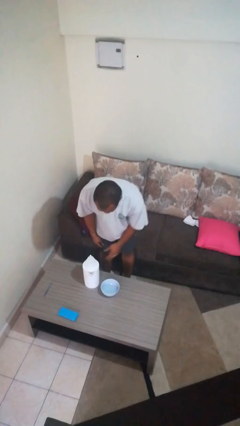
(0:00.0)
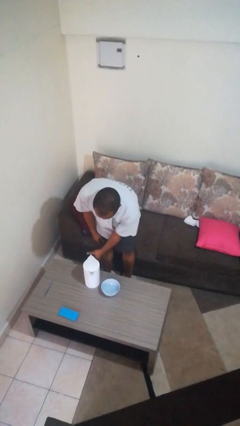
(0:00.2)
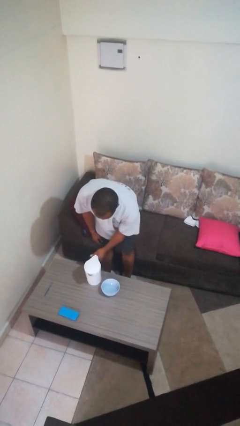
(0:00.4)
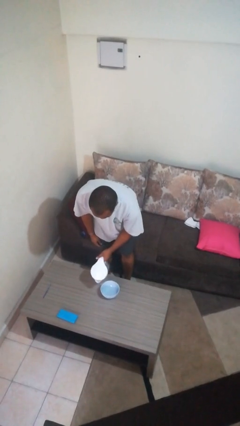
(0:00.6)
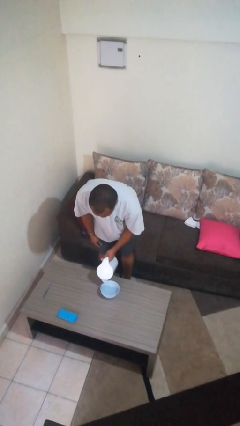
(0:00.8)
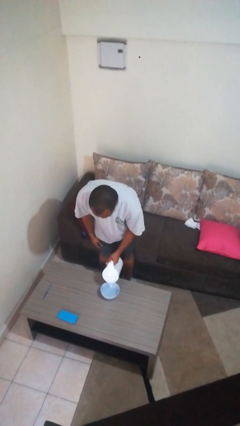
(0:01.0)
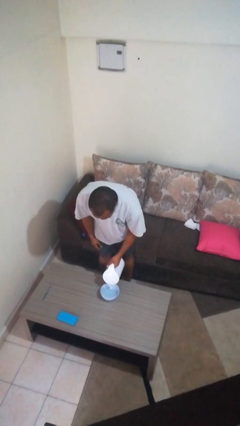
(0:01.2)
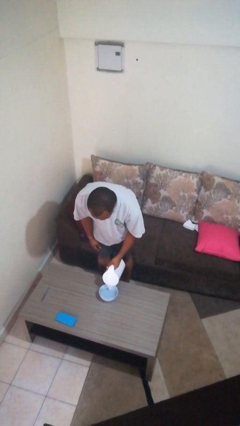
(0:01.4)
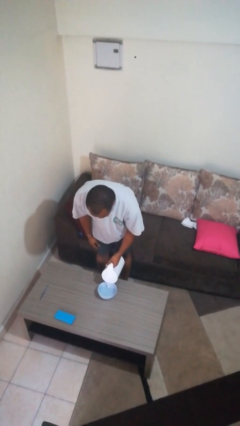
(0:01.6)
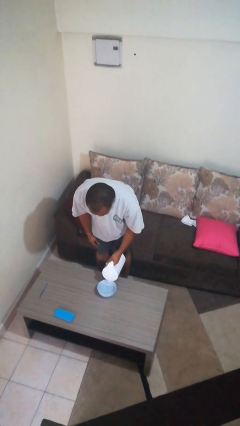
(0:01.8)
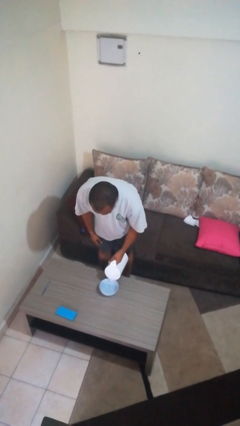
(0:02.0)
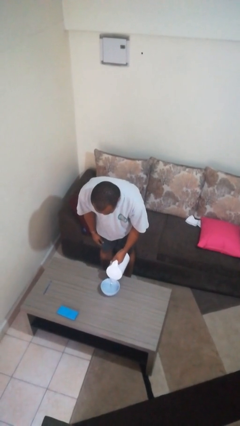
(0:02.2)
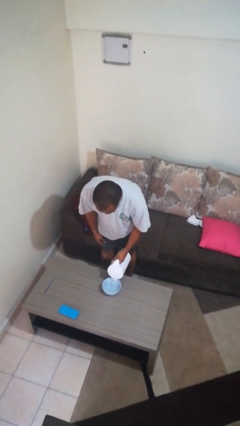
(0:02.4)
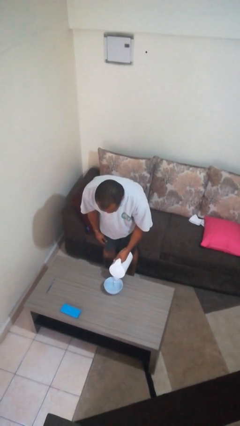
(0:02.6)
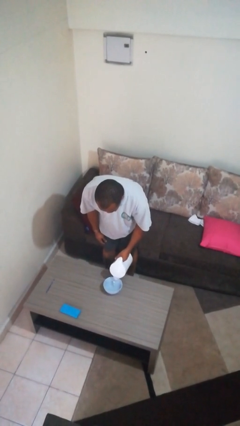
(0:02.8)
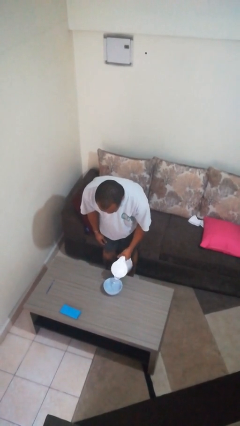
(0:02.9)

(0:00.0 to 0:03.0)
person pours into bowl

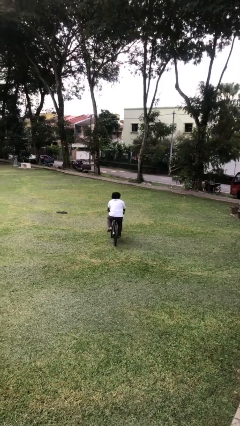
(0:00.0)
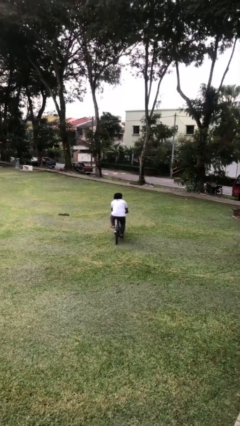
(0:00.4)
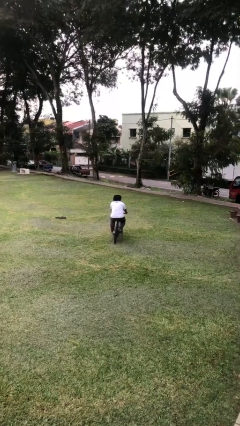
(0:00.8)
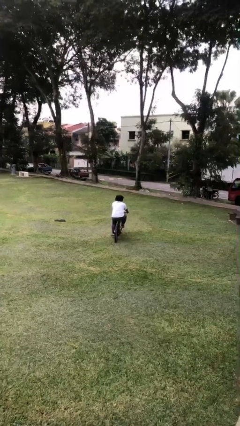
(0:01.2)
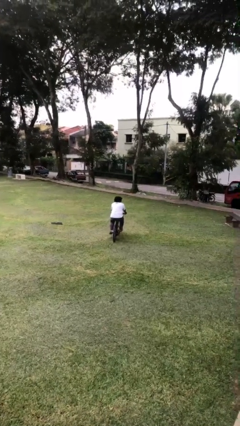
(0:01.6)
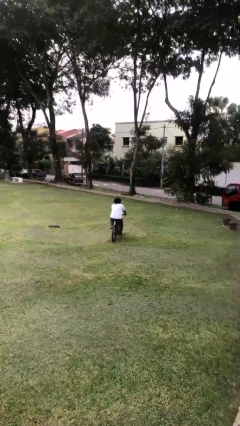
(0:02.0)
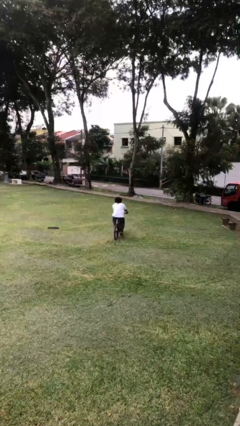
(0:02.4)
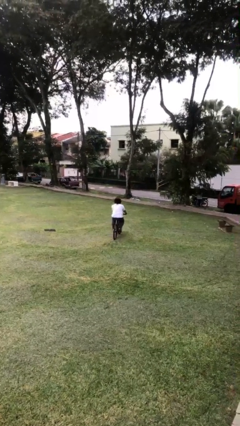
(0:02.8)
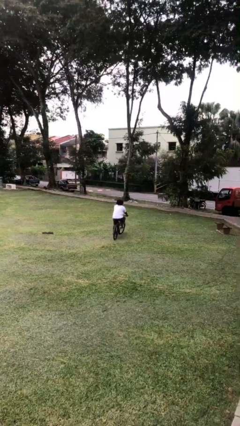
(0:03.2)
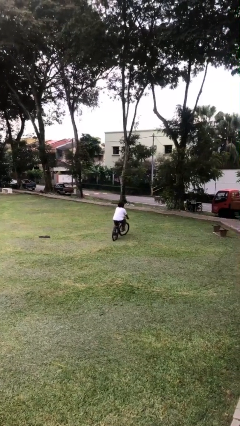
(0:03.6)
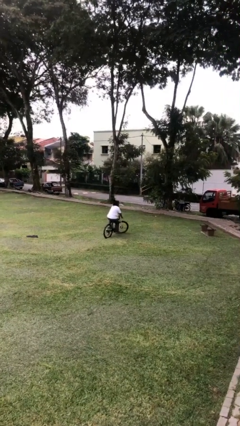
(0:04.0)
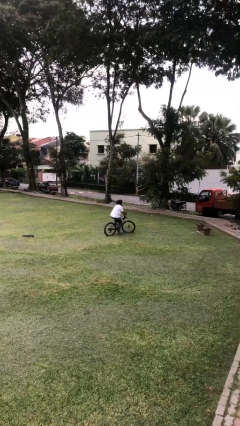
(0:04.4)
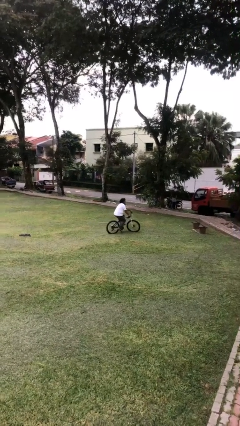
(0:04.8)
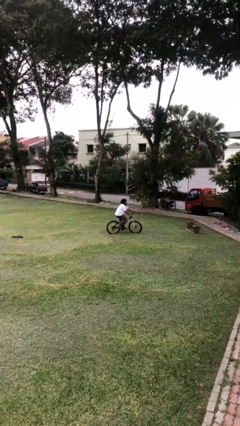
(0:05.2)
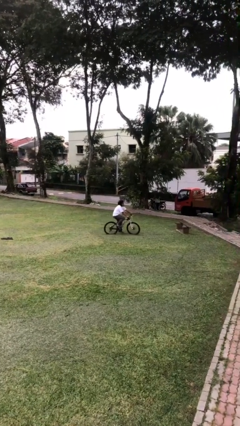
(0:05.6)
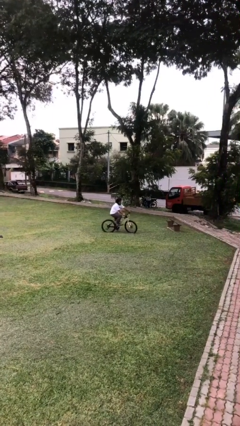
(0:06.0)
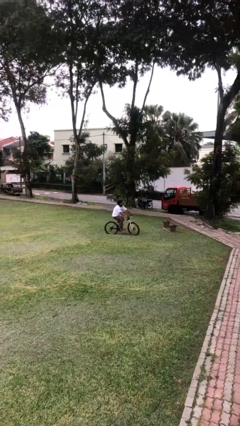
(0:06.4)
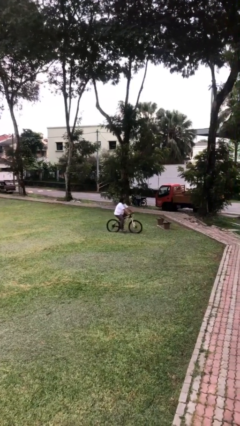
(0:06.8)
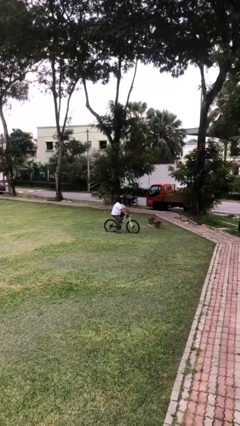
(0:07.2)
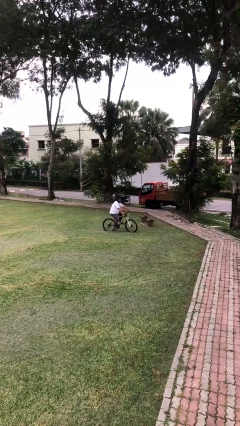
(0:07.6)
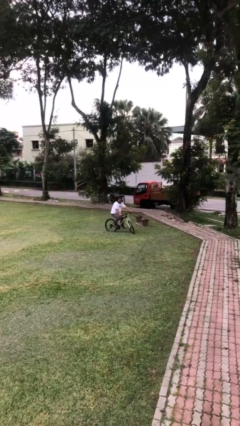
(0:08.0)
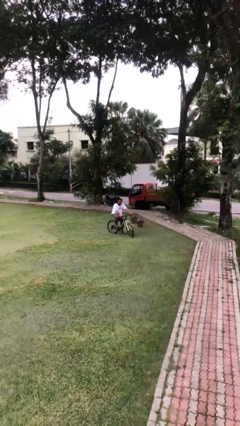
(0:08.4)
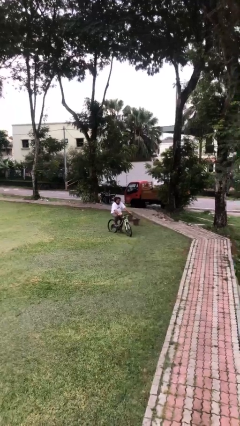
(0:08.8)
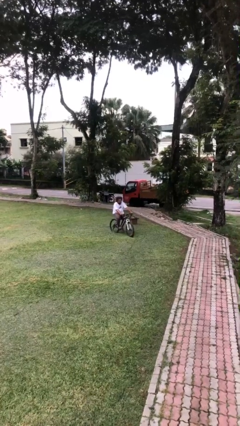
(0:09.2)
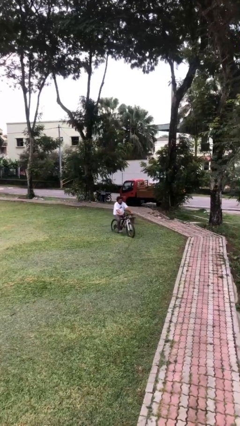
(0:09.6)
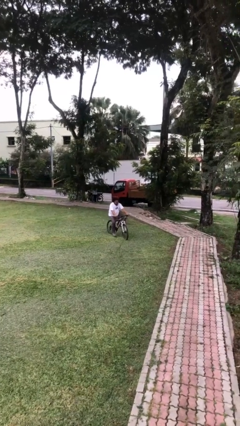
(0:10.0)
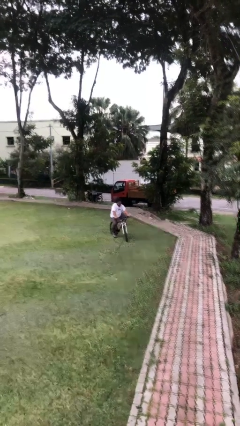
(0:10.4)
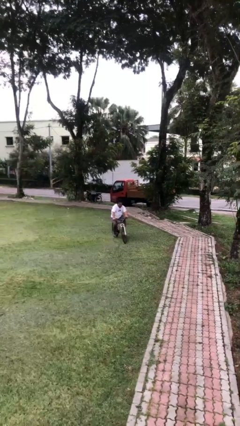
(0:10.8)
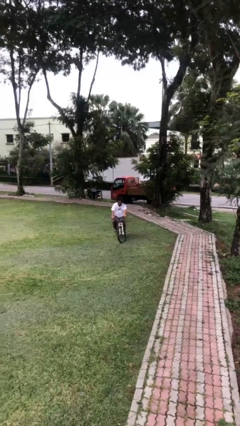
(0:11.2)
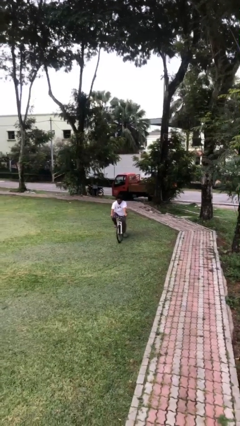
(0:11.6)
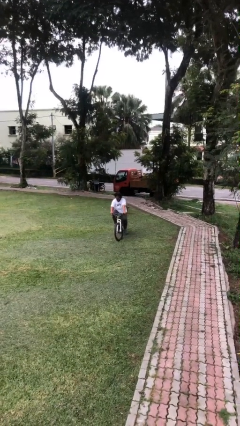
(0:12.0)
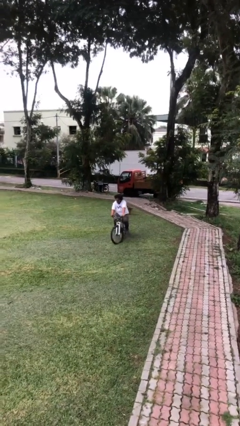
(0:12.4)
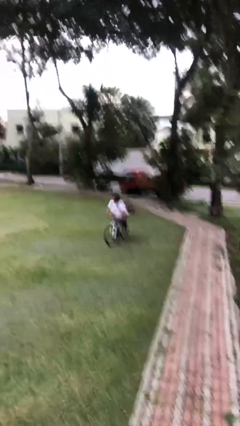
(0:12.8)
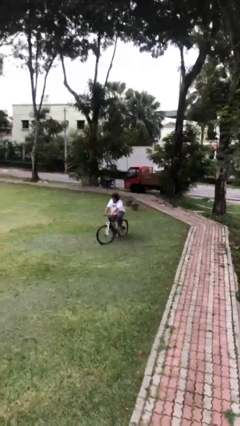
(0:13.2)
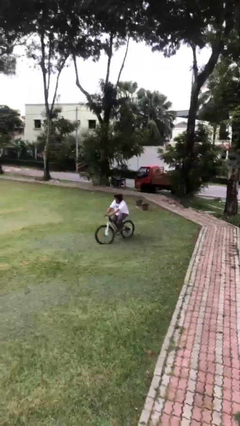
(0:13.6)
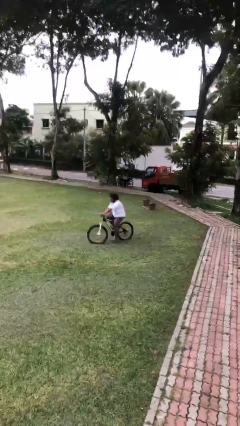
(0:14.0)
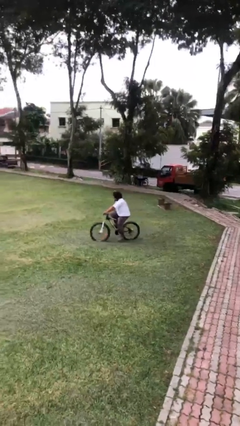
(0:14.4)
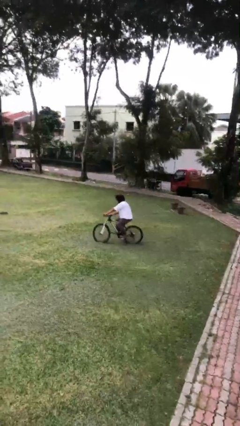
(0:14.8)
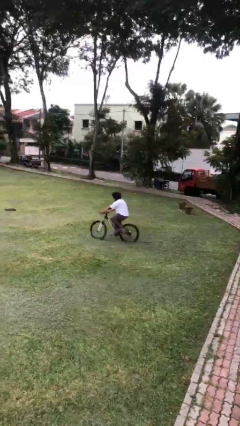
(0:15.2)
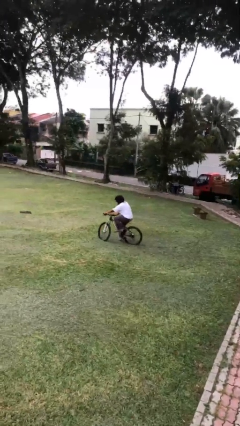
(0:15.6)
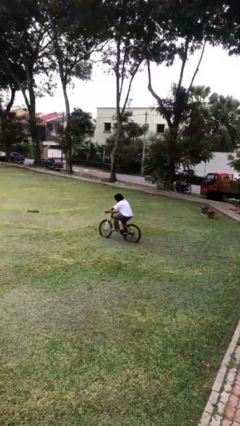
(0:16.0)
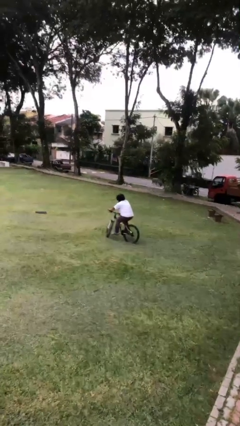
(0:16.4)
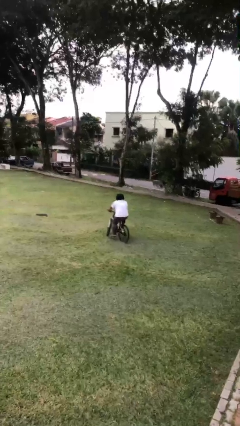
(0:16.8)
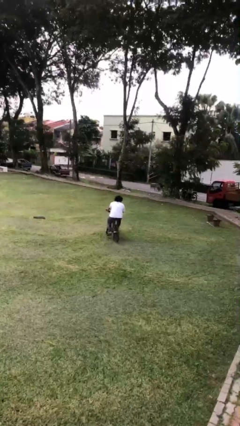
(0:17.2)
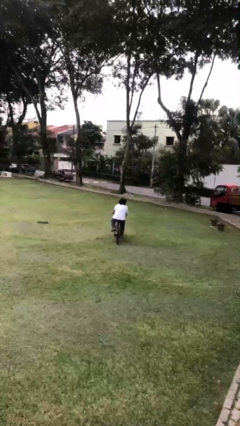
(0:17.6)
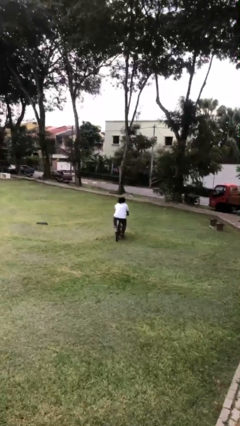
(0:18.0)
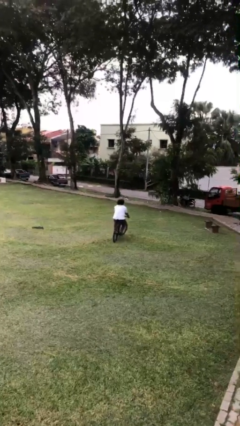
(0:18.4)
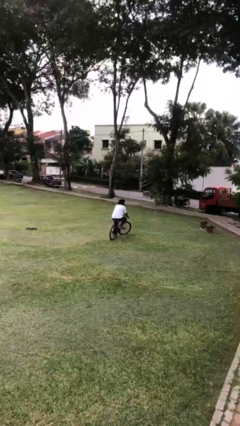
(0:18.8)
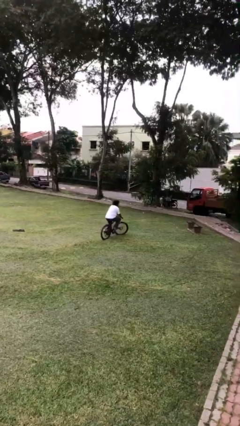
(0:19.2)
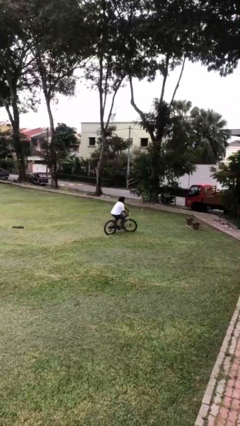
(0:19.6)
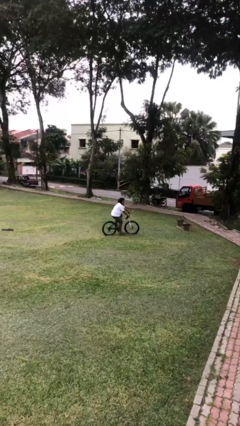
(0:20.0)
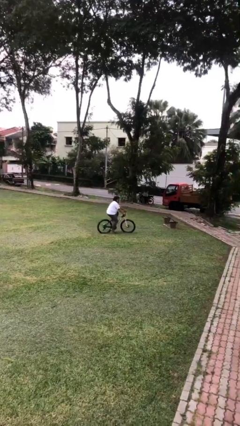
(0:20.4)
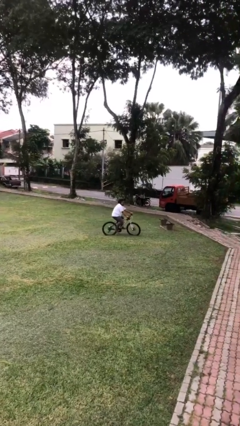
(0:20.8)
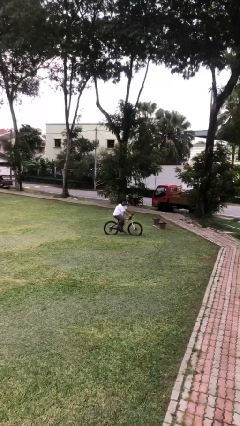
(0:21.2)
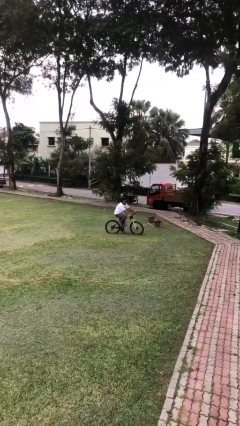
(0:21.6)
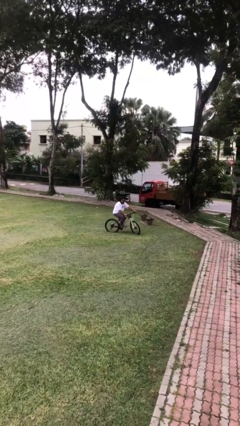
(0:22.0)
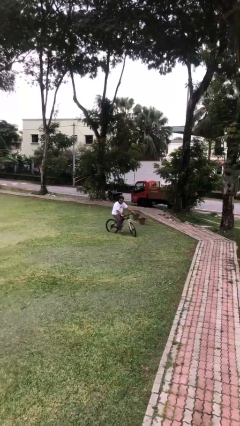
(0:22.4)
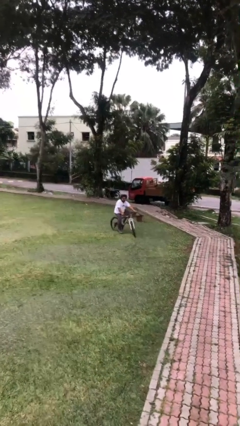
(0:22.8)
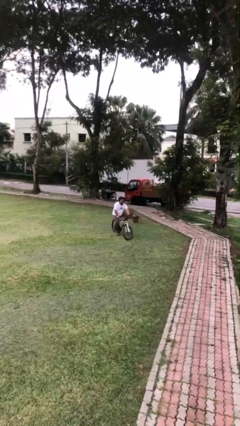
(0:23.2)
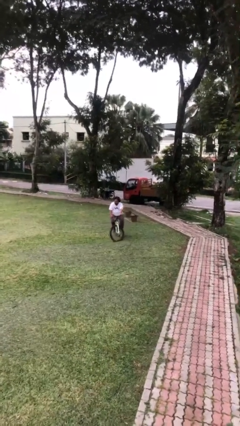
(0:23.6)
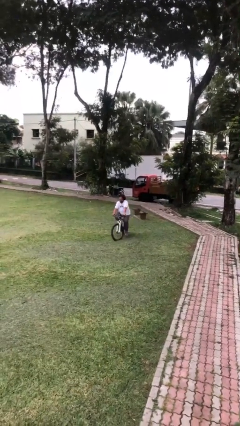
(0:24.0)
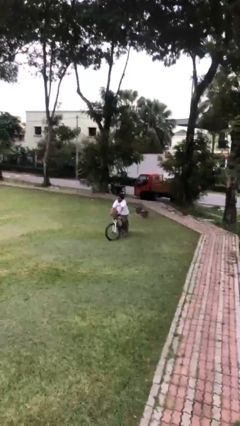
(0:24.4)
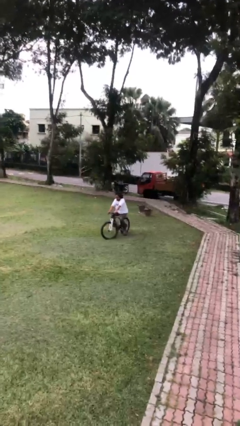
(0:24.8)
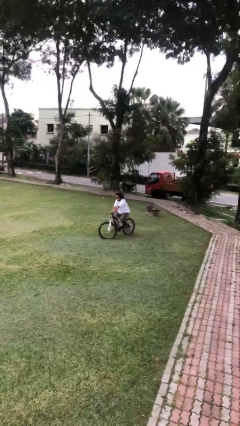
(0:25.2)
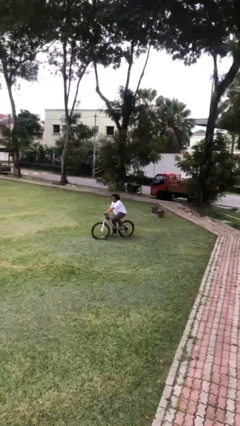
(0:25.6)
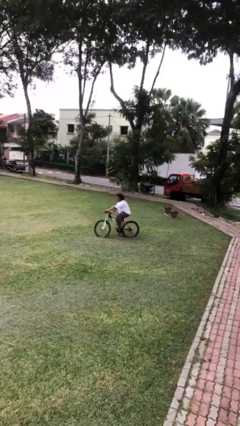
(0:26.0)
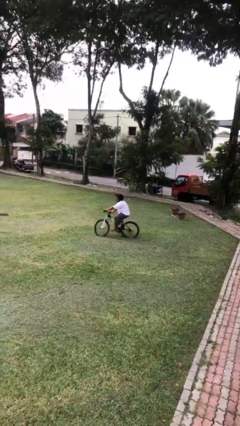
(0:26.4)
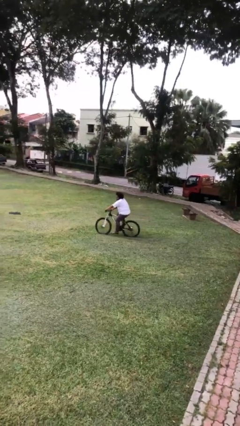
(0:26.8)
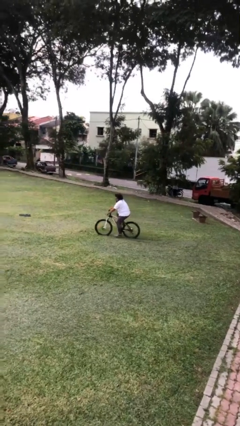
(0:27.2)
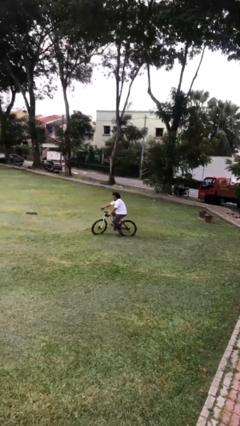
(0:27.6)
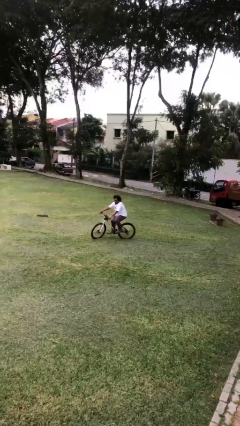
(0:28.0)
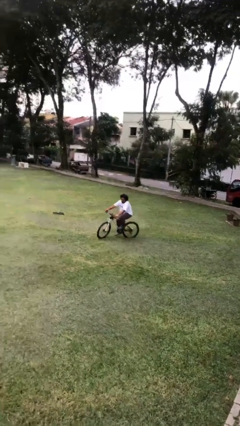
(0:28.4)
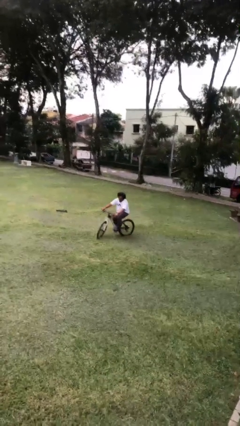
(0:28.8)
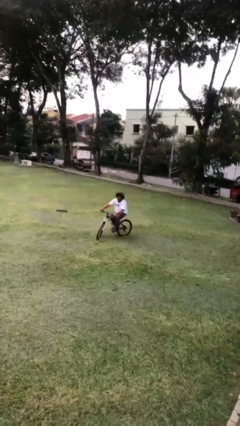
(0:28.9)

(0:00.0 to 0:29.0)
person rides bicycle

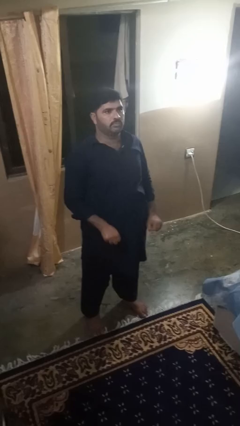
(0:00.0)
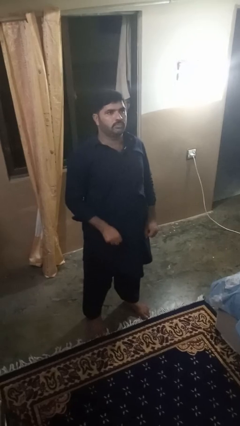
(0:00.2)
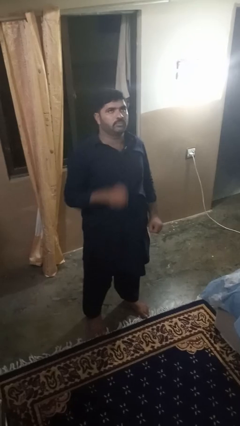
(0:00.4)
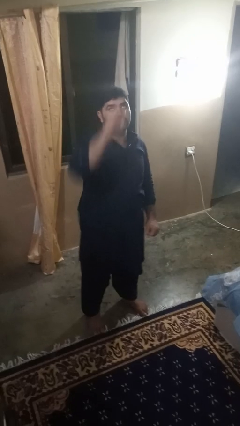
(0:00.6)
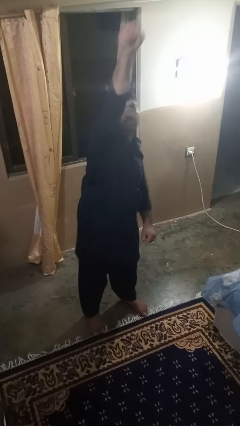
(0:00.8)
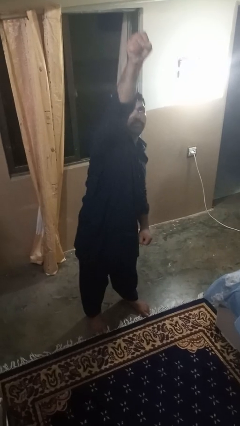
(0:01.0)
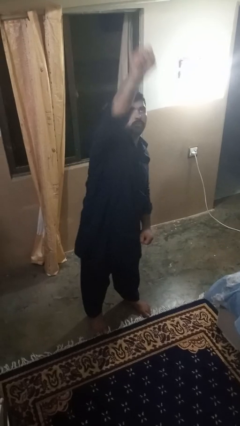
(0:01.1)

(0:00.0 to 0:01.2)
person punches
